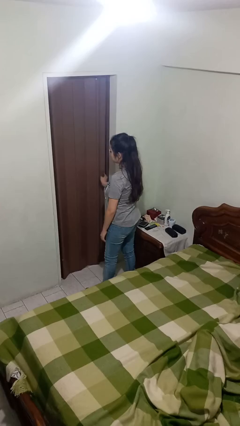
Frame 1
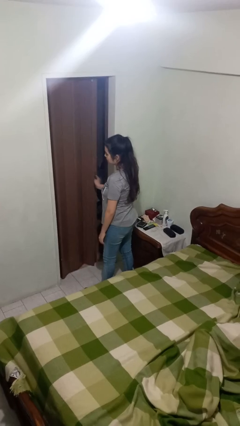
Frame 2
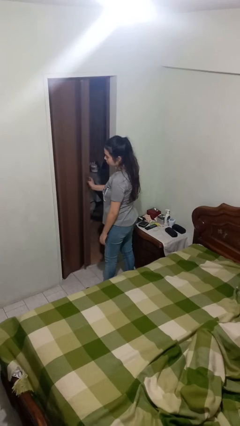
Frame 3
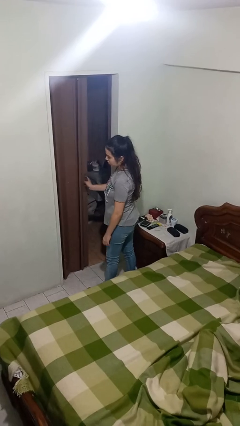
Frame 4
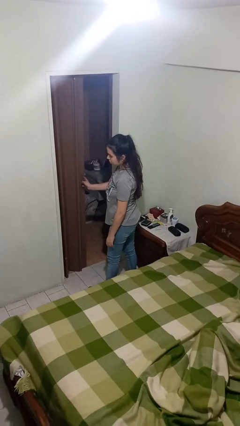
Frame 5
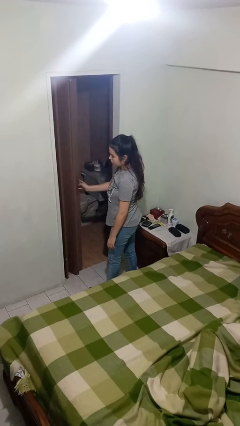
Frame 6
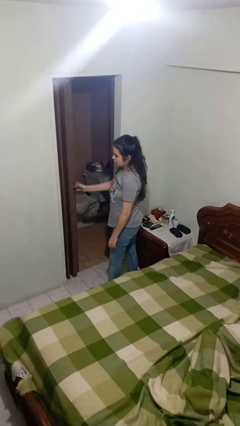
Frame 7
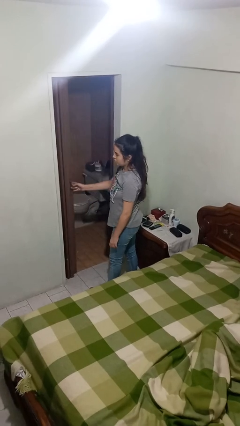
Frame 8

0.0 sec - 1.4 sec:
person opens sliding door

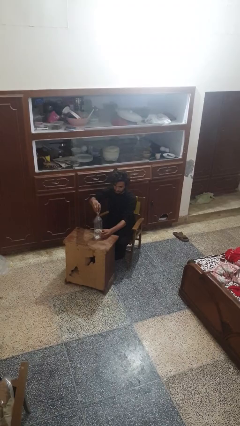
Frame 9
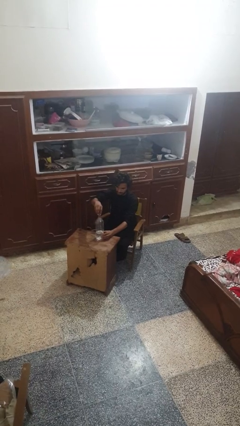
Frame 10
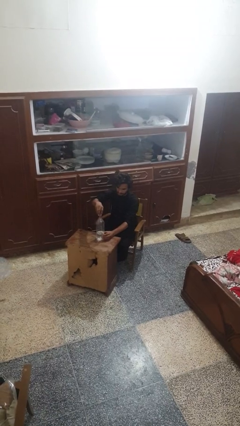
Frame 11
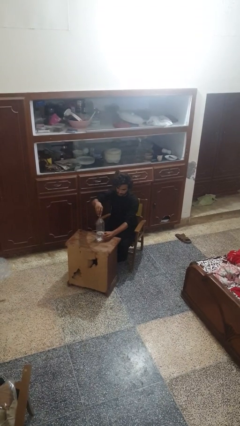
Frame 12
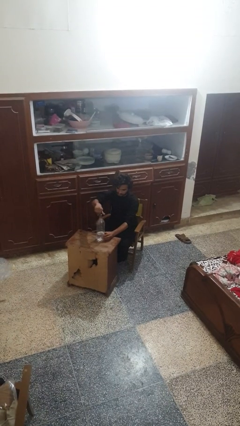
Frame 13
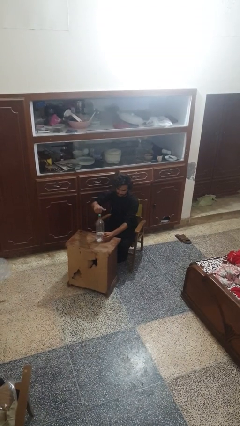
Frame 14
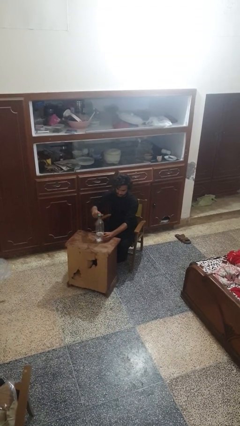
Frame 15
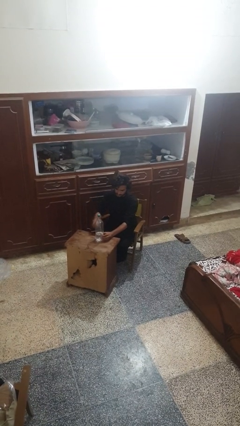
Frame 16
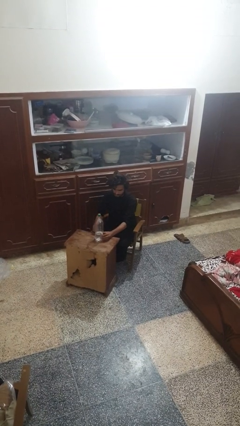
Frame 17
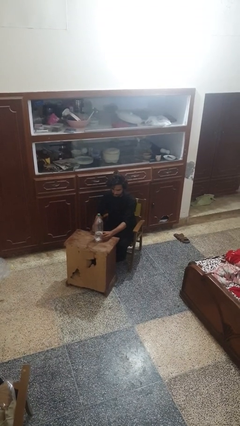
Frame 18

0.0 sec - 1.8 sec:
person screws lid to bottle

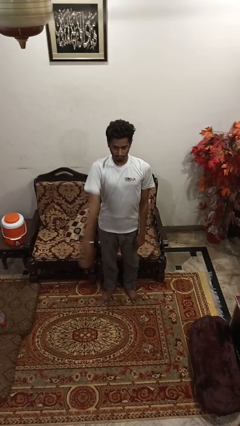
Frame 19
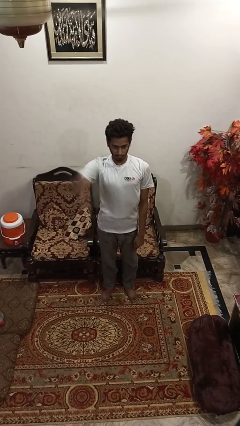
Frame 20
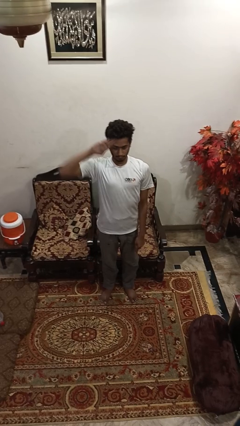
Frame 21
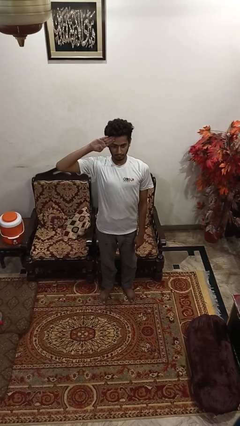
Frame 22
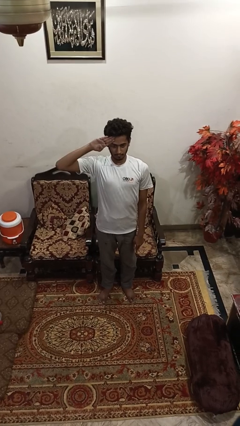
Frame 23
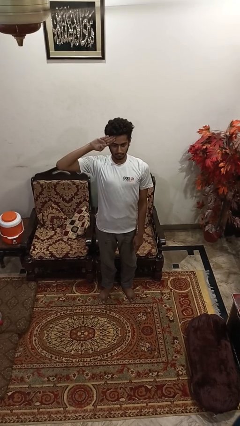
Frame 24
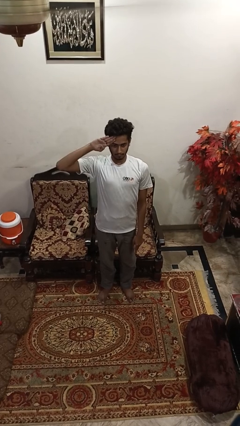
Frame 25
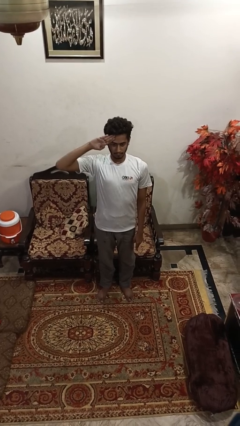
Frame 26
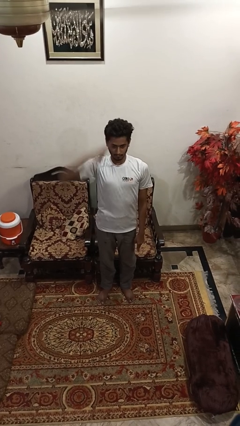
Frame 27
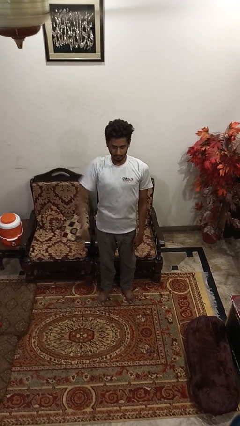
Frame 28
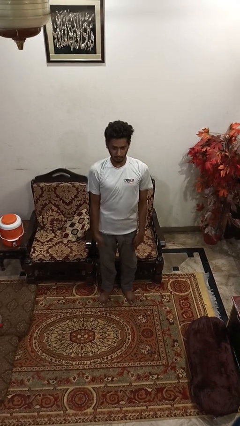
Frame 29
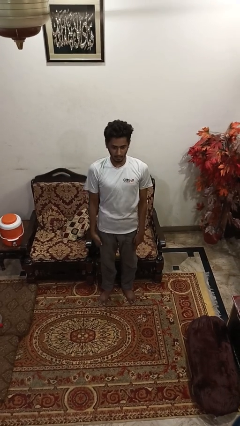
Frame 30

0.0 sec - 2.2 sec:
person salutes

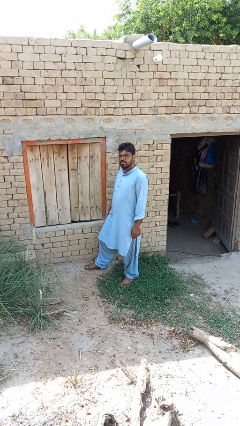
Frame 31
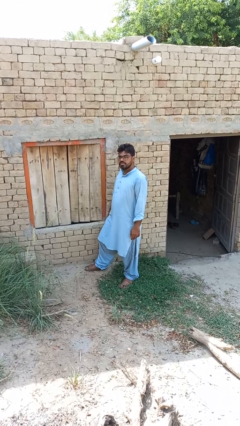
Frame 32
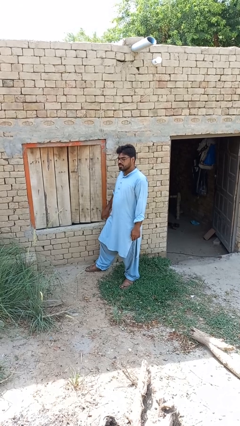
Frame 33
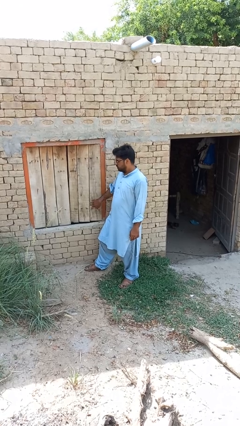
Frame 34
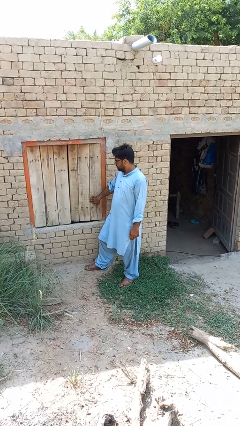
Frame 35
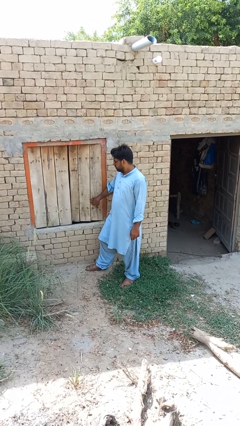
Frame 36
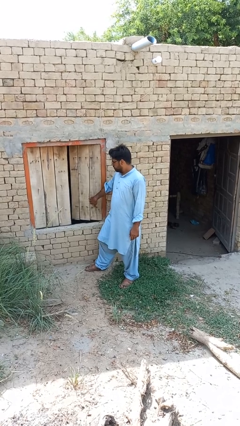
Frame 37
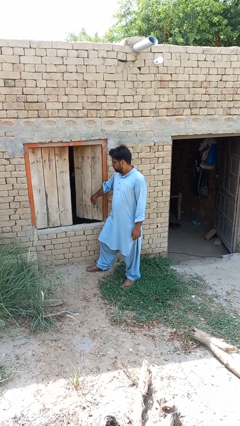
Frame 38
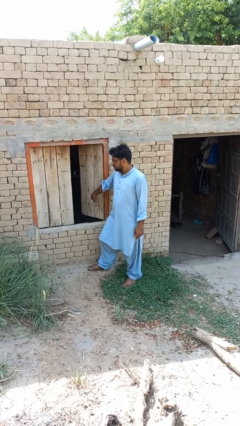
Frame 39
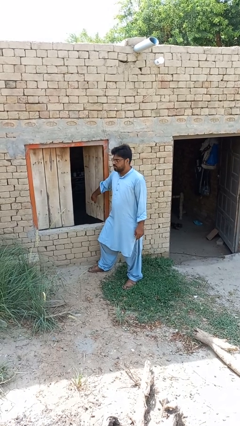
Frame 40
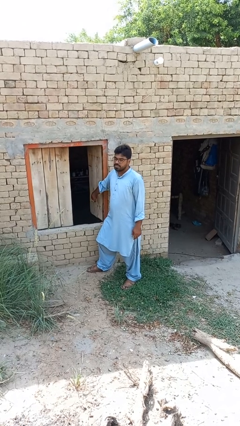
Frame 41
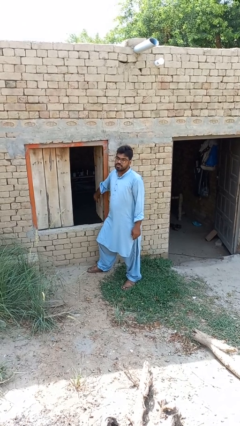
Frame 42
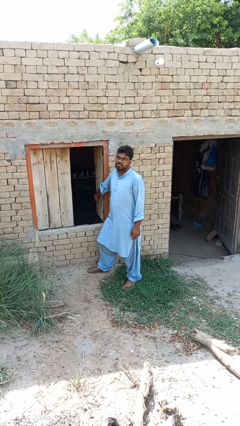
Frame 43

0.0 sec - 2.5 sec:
person opens home window

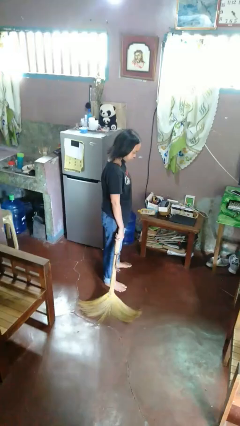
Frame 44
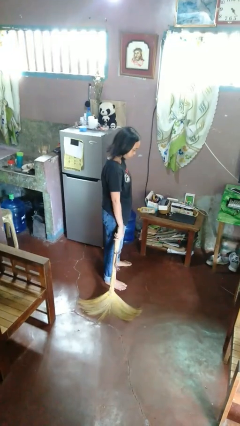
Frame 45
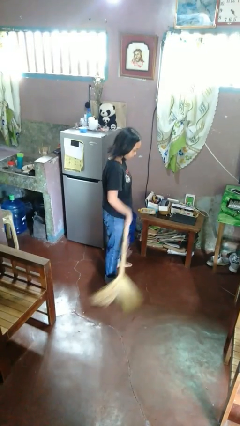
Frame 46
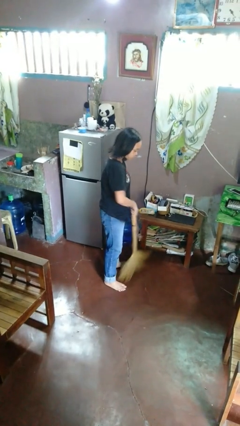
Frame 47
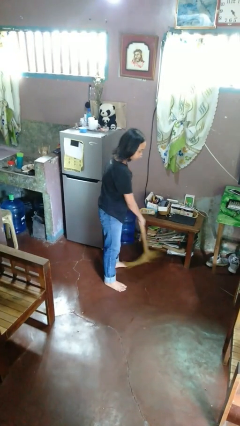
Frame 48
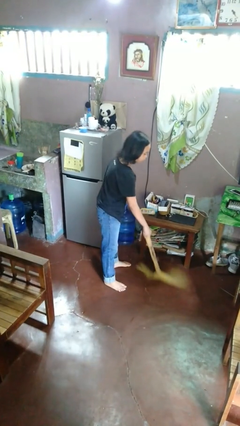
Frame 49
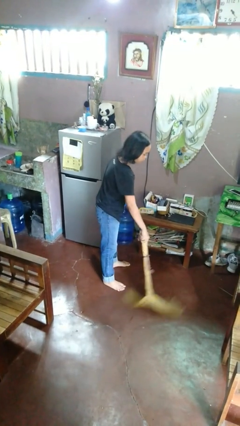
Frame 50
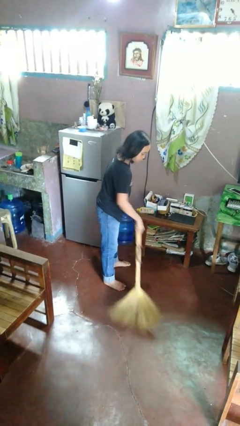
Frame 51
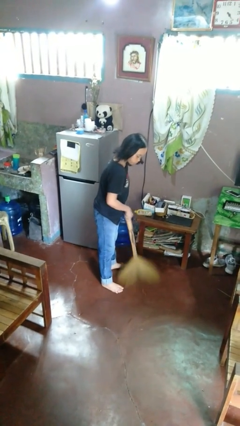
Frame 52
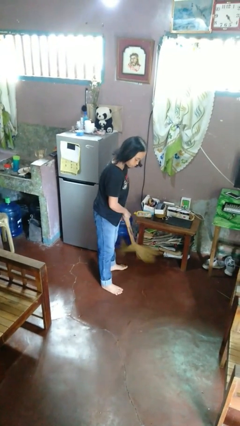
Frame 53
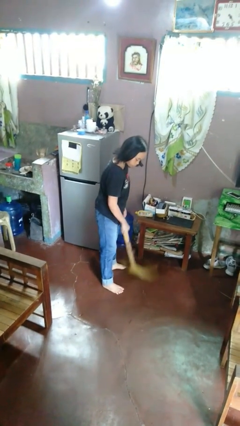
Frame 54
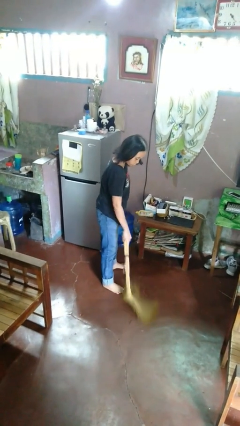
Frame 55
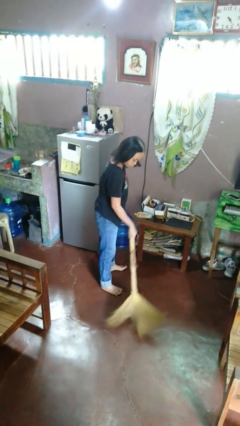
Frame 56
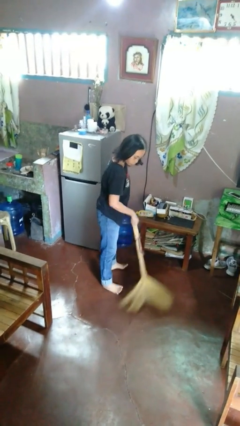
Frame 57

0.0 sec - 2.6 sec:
person sweeps floor

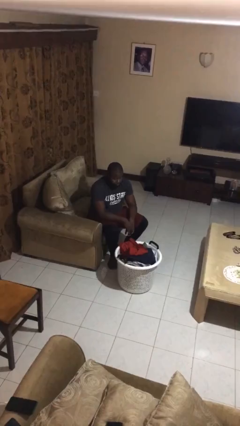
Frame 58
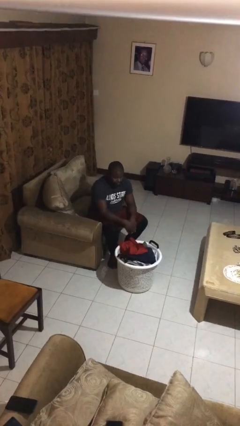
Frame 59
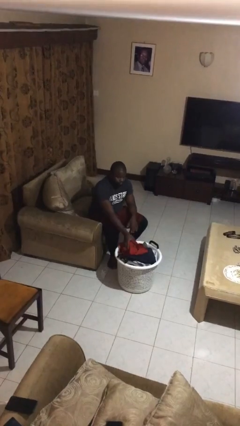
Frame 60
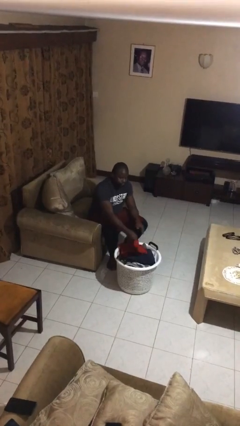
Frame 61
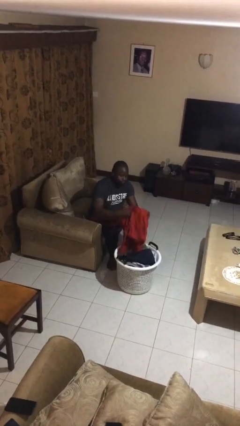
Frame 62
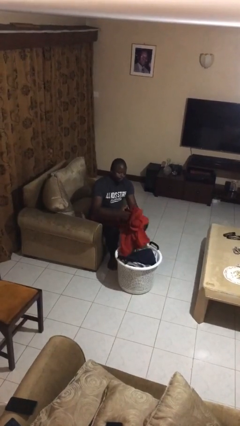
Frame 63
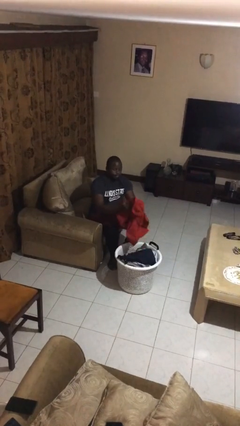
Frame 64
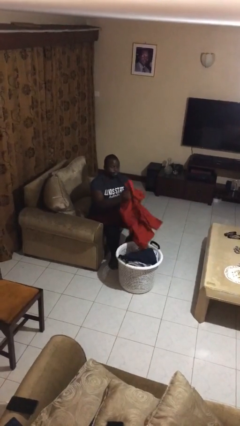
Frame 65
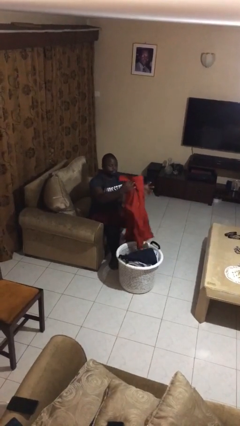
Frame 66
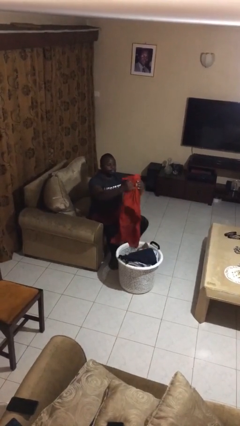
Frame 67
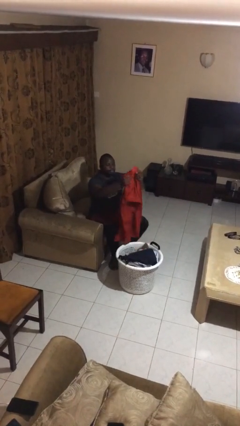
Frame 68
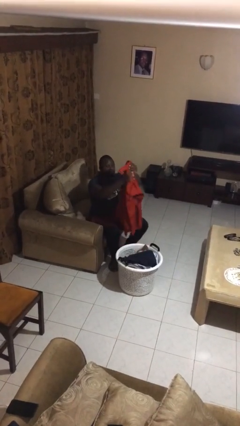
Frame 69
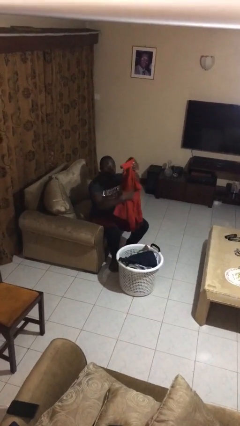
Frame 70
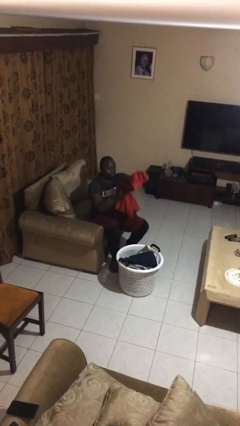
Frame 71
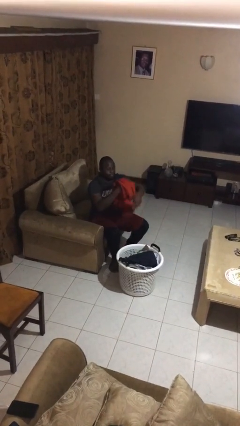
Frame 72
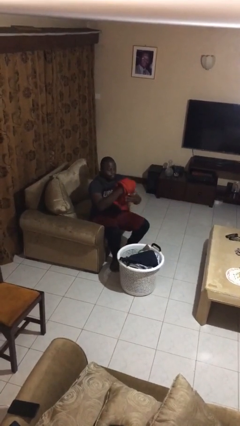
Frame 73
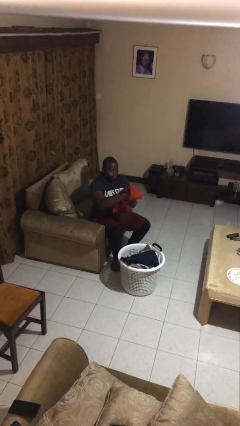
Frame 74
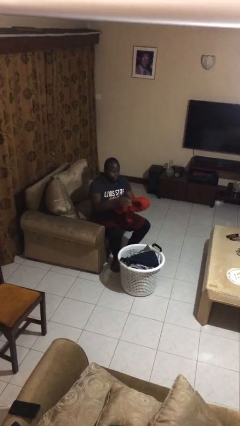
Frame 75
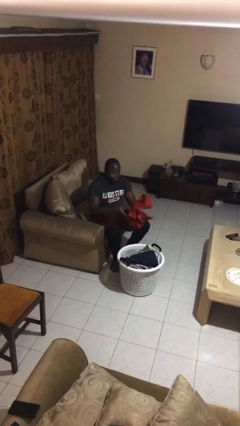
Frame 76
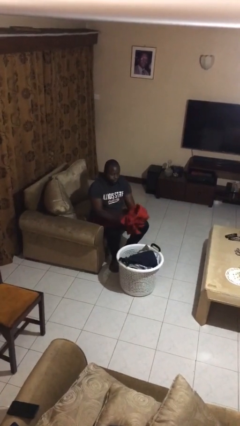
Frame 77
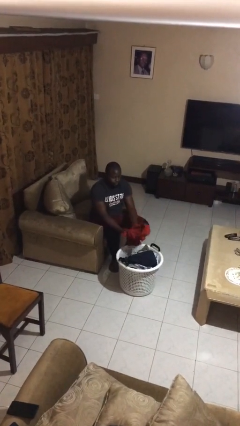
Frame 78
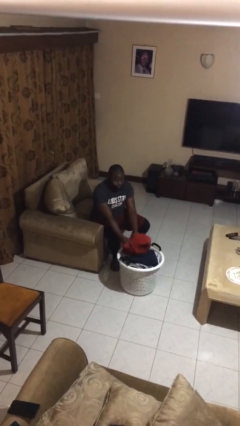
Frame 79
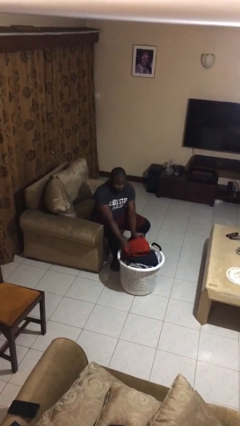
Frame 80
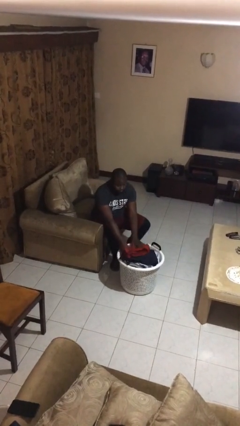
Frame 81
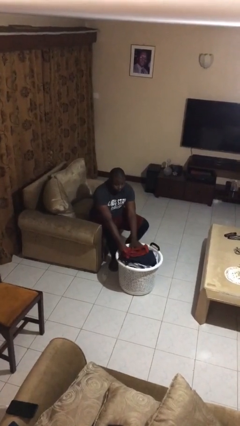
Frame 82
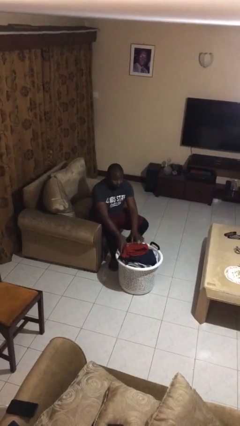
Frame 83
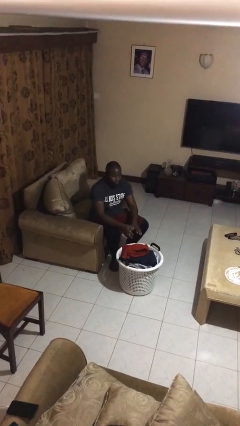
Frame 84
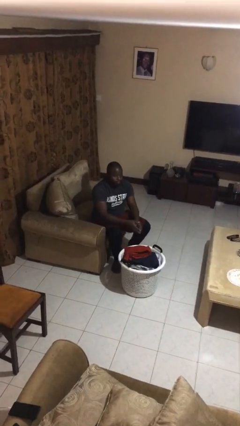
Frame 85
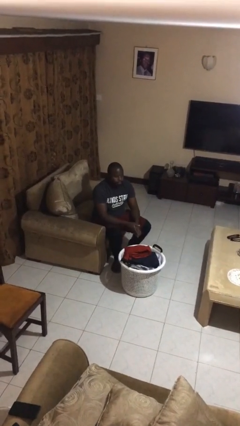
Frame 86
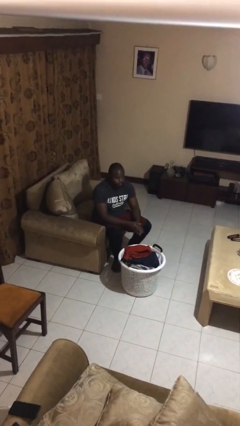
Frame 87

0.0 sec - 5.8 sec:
person folds shirt

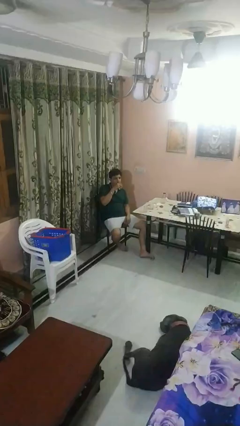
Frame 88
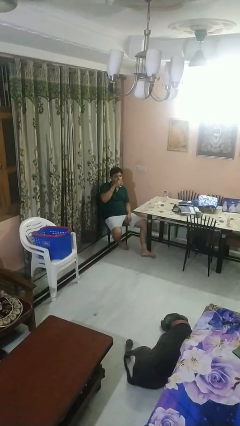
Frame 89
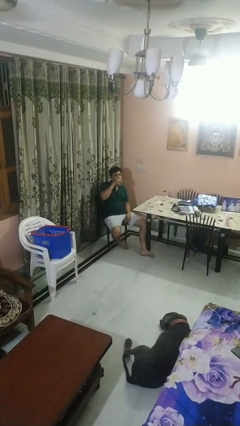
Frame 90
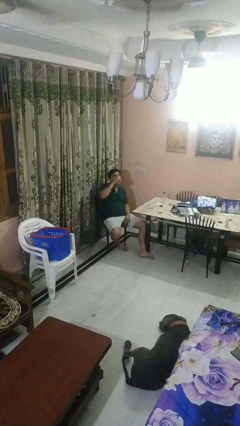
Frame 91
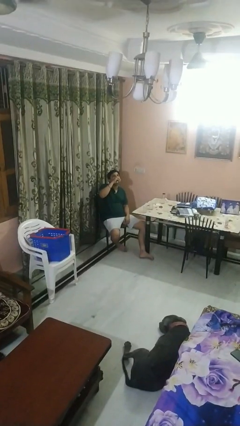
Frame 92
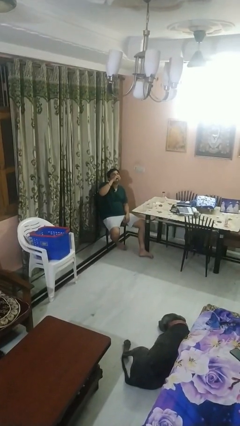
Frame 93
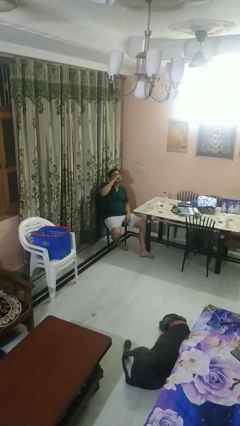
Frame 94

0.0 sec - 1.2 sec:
person drinks from shotglass
